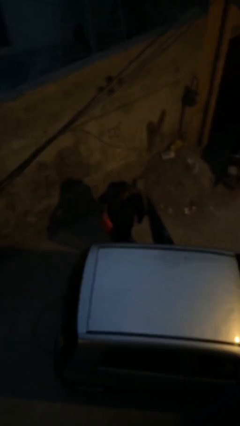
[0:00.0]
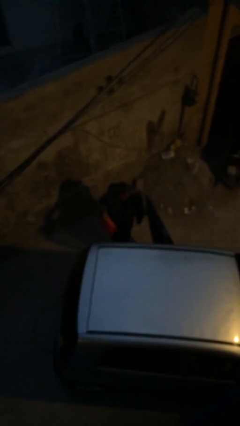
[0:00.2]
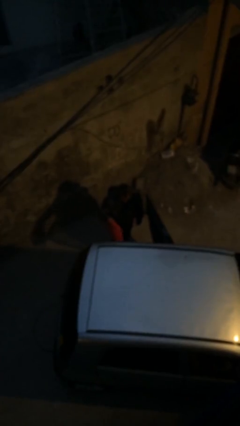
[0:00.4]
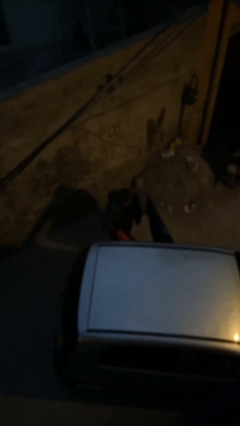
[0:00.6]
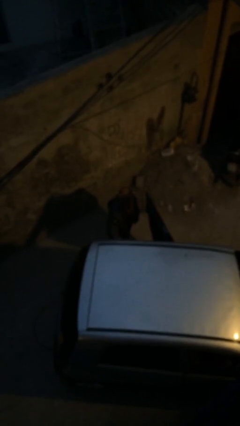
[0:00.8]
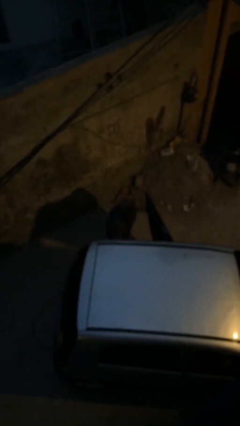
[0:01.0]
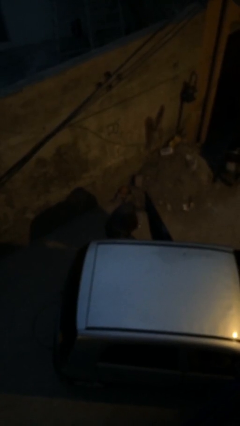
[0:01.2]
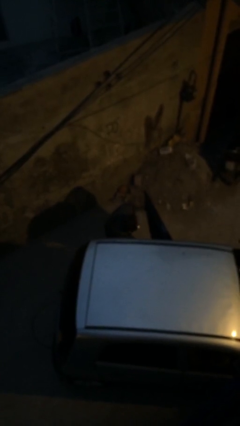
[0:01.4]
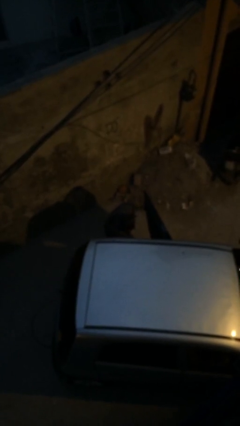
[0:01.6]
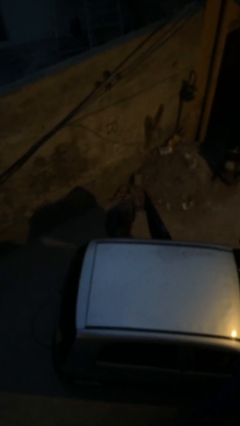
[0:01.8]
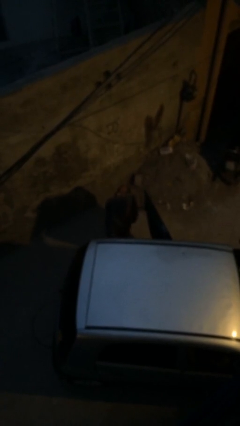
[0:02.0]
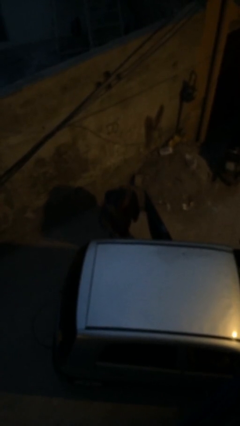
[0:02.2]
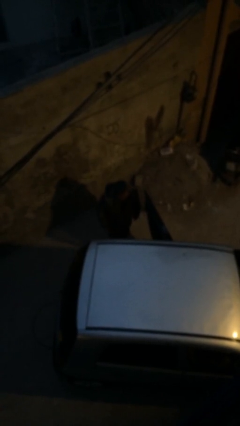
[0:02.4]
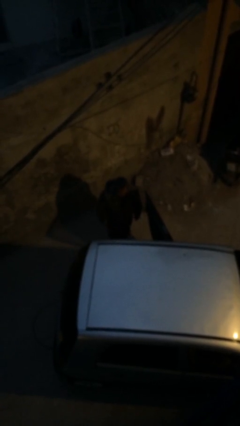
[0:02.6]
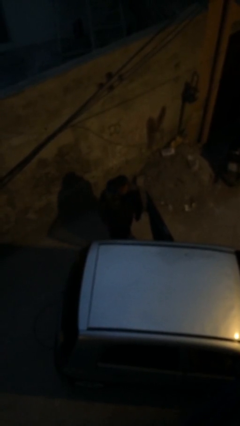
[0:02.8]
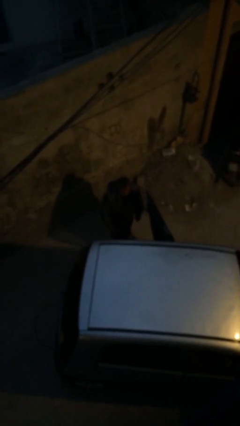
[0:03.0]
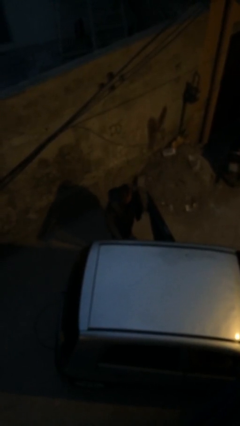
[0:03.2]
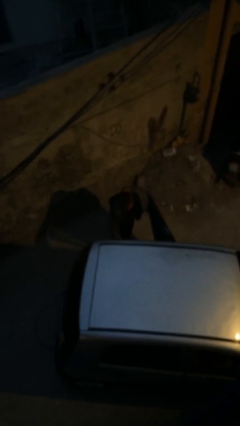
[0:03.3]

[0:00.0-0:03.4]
person loads car

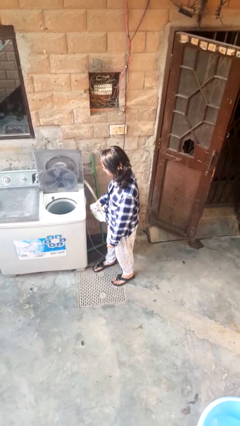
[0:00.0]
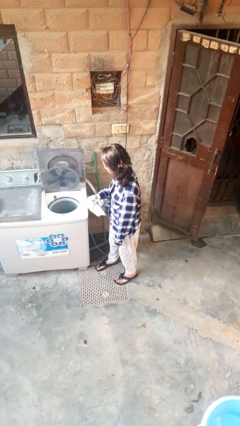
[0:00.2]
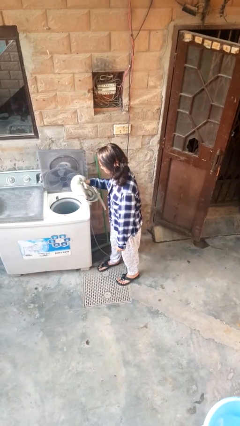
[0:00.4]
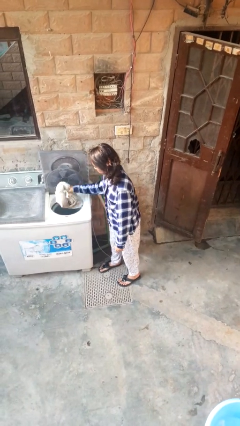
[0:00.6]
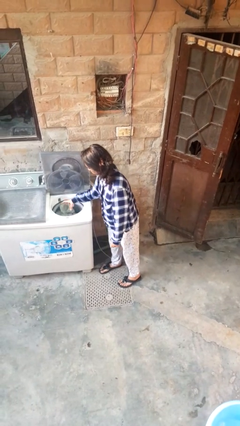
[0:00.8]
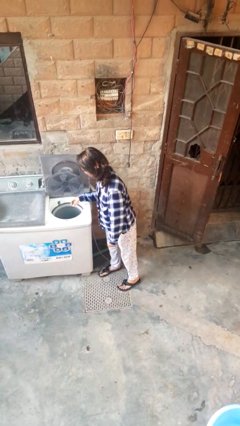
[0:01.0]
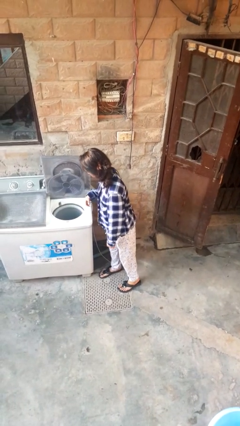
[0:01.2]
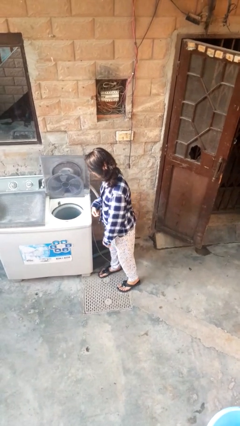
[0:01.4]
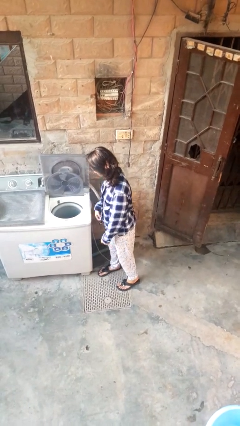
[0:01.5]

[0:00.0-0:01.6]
person loads dryer

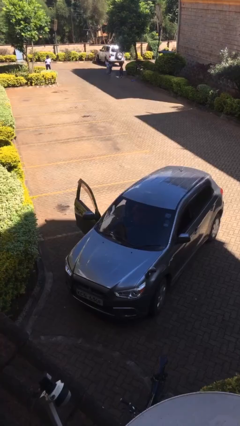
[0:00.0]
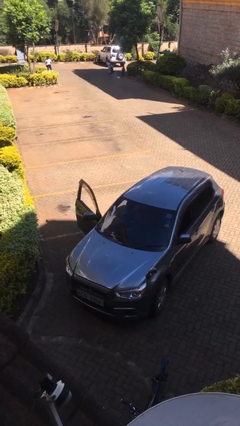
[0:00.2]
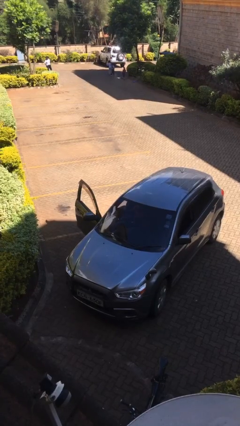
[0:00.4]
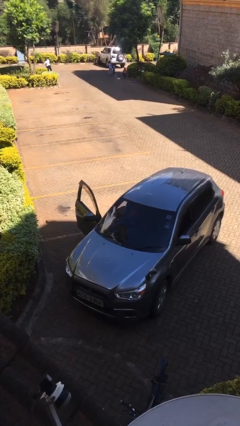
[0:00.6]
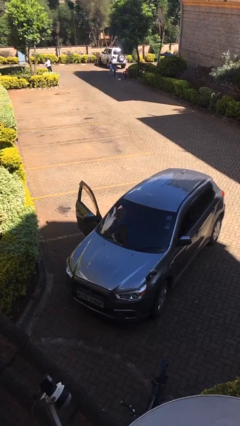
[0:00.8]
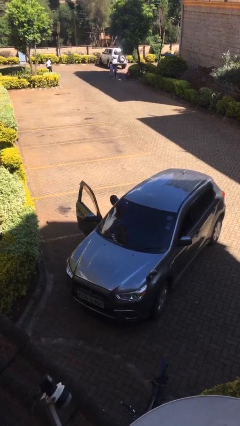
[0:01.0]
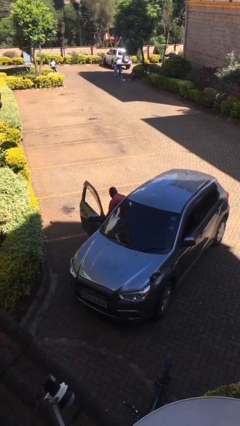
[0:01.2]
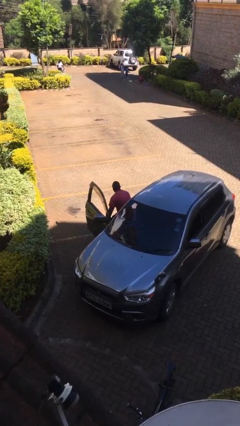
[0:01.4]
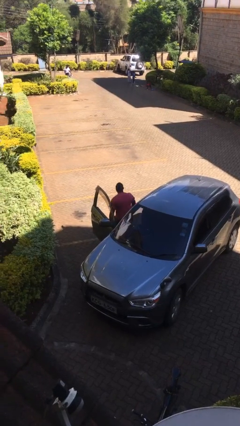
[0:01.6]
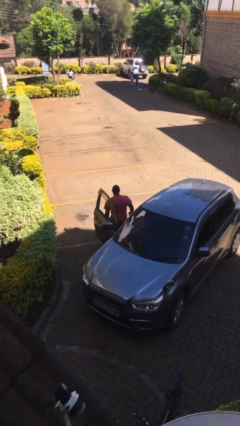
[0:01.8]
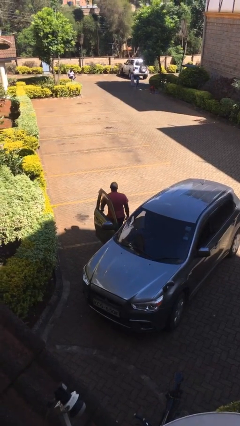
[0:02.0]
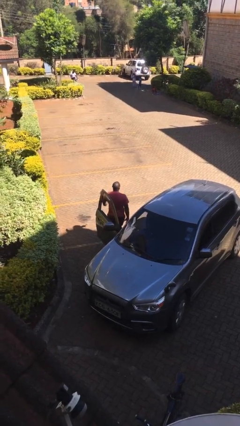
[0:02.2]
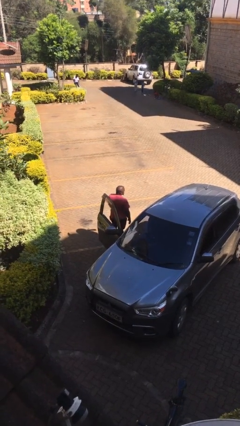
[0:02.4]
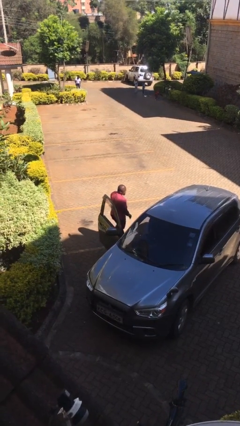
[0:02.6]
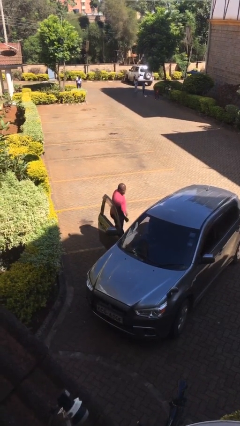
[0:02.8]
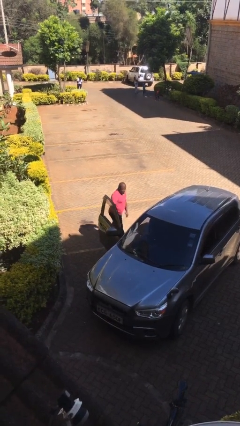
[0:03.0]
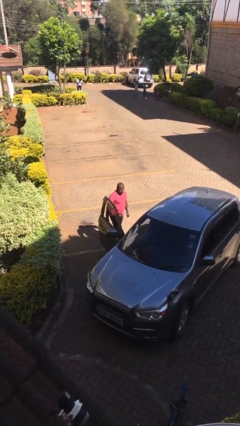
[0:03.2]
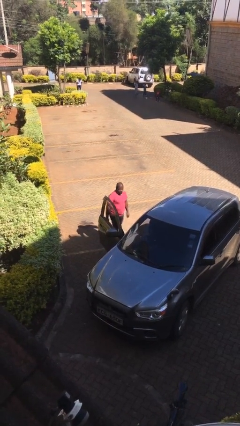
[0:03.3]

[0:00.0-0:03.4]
person exits car

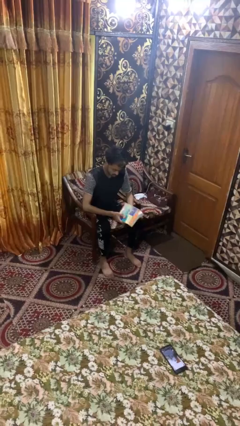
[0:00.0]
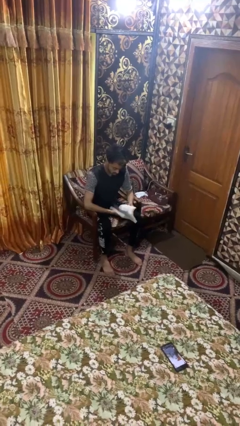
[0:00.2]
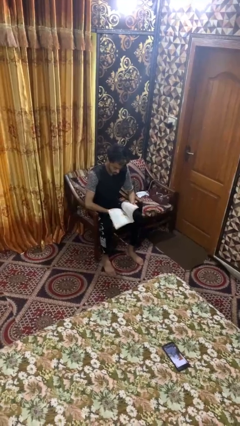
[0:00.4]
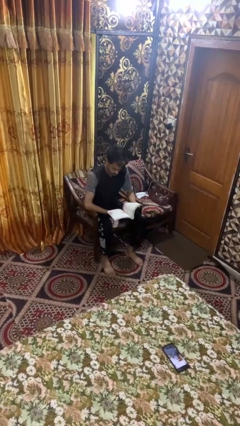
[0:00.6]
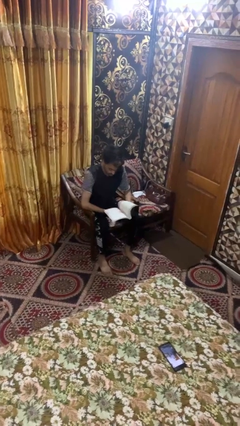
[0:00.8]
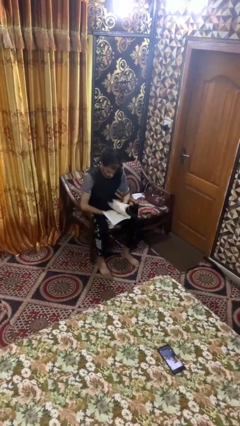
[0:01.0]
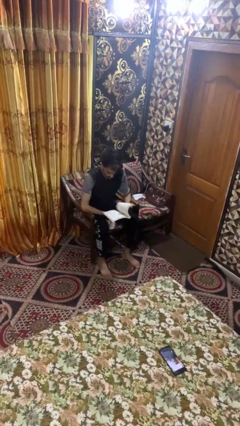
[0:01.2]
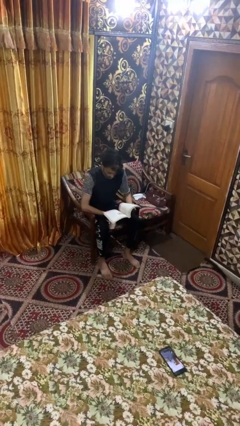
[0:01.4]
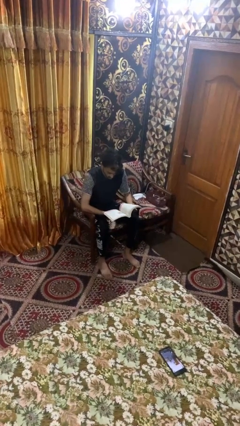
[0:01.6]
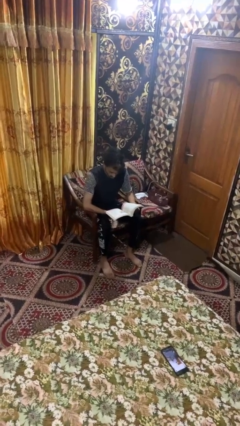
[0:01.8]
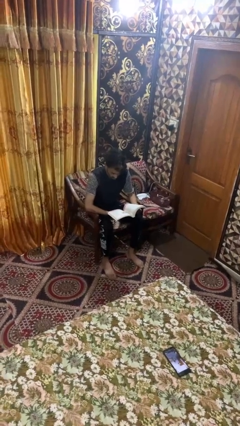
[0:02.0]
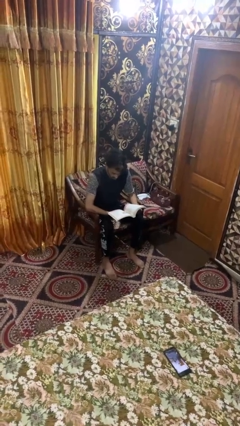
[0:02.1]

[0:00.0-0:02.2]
person reads book

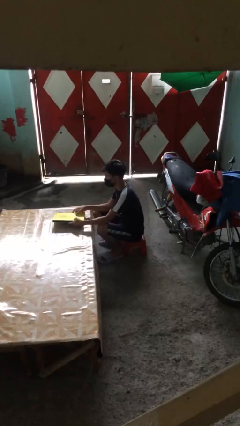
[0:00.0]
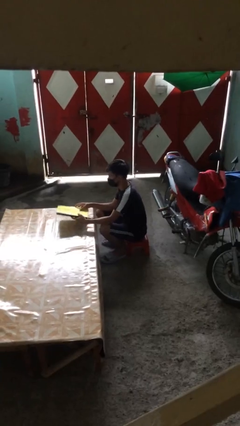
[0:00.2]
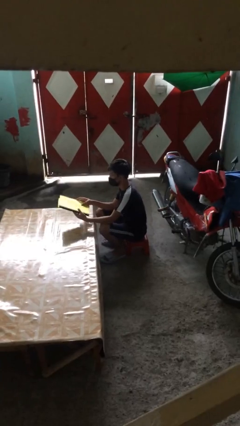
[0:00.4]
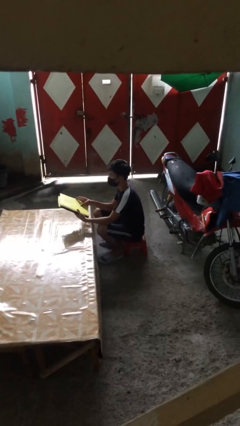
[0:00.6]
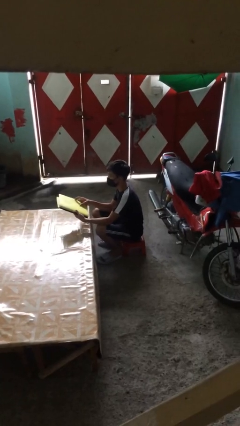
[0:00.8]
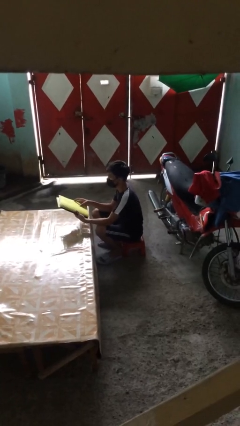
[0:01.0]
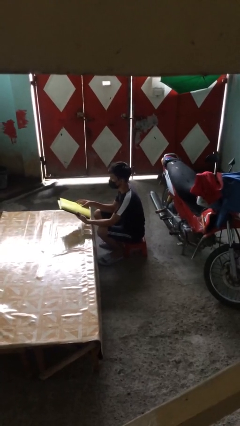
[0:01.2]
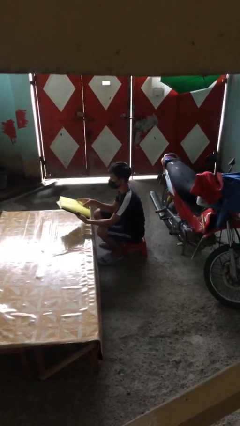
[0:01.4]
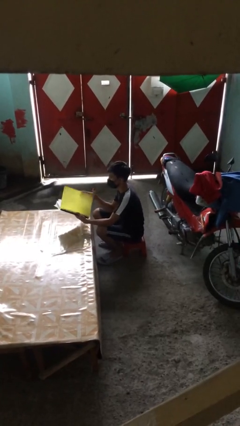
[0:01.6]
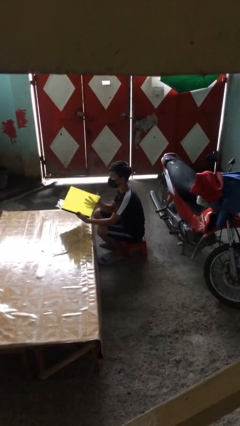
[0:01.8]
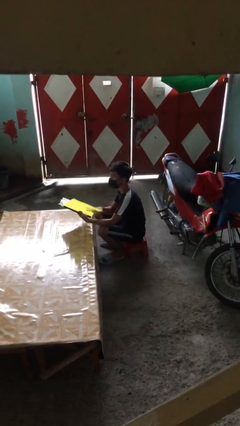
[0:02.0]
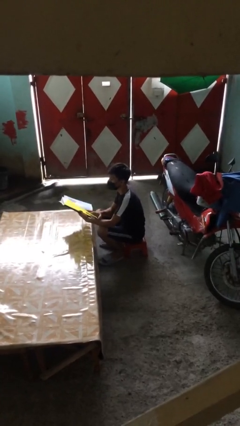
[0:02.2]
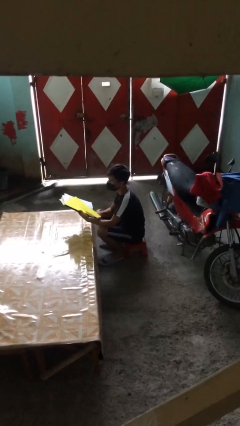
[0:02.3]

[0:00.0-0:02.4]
person picks up object from table

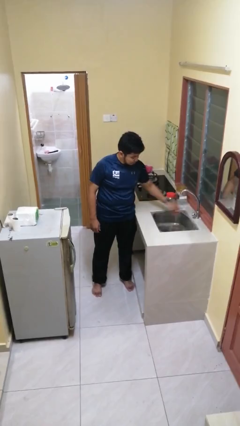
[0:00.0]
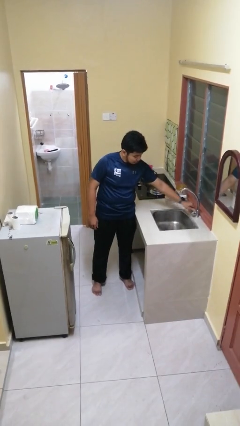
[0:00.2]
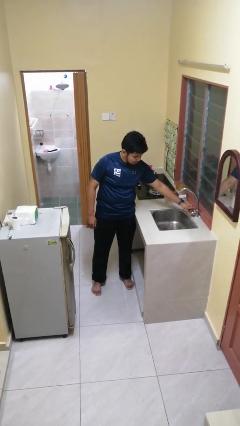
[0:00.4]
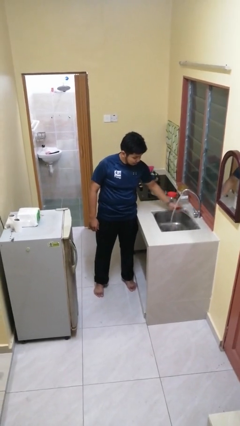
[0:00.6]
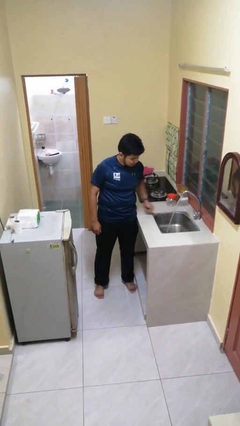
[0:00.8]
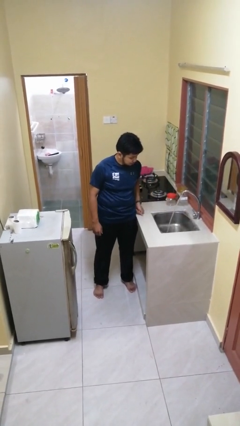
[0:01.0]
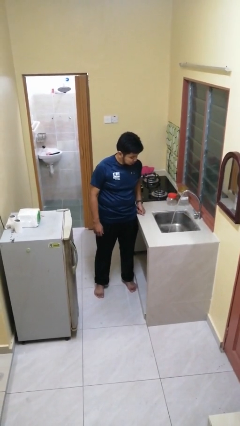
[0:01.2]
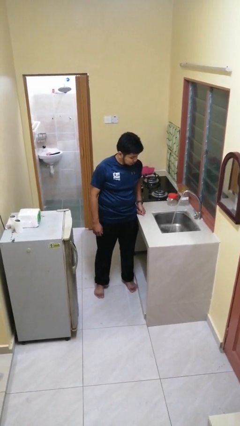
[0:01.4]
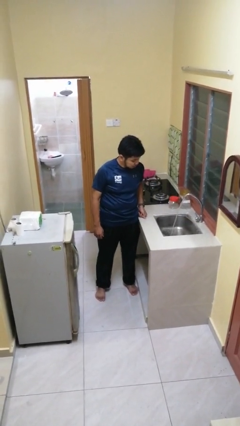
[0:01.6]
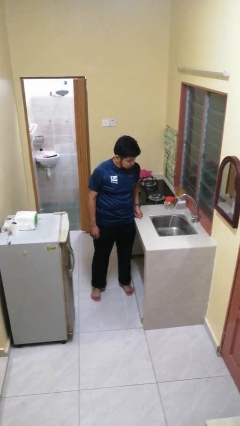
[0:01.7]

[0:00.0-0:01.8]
person turns on faucet

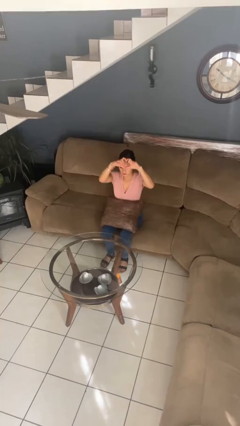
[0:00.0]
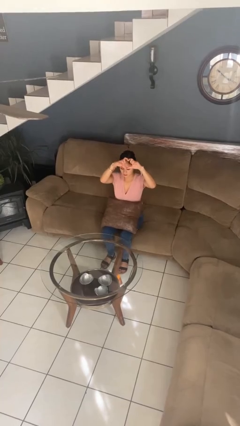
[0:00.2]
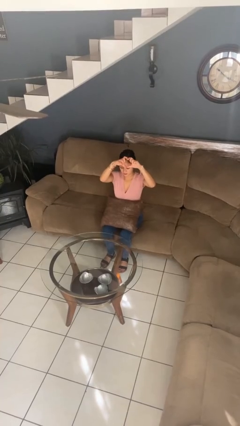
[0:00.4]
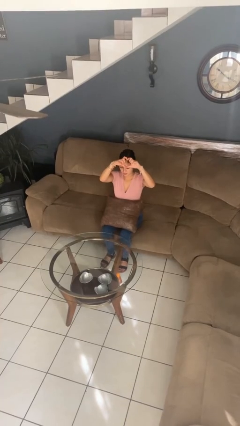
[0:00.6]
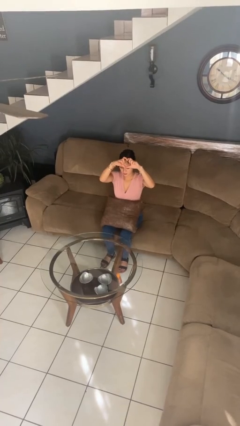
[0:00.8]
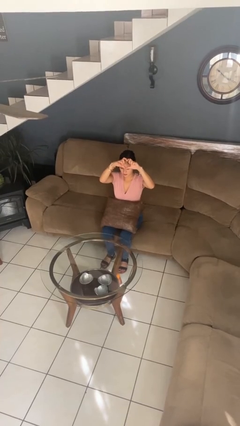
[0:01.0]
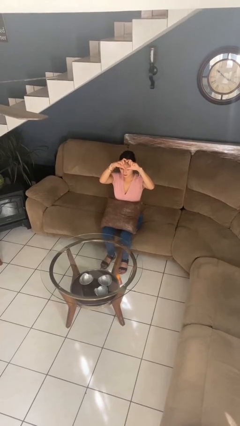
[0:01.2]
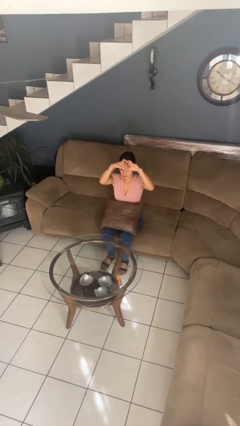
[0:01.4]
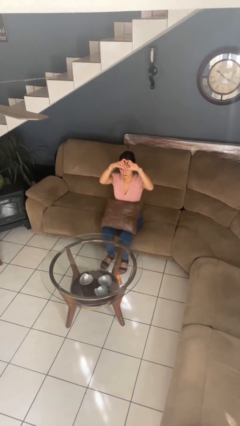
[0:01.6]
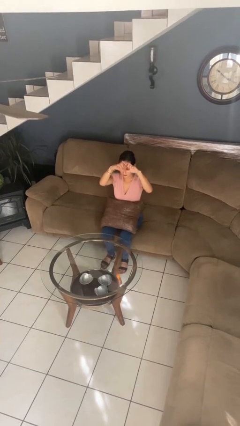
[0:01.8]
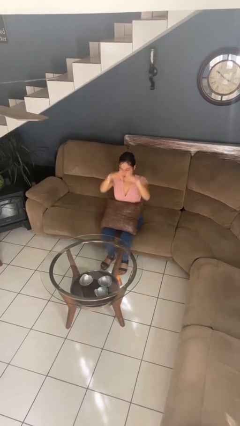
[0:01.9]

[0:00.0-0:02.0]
person gestures heart

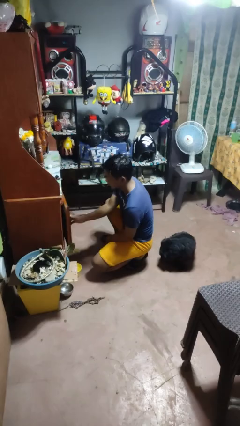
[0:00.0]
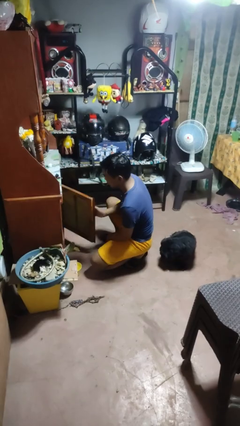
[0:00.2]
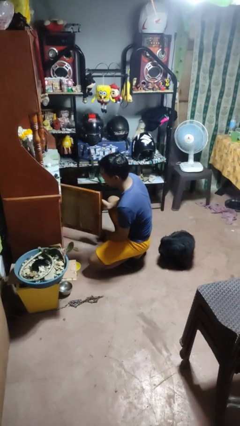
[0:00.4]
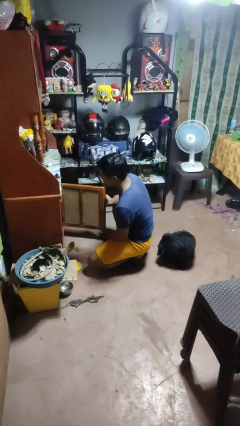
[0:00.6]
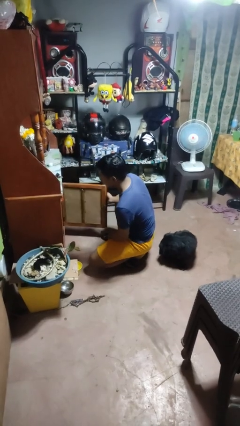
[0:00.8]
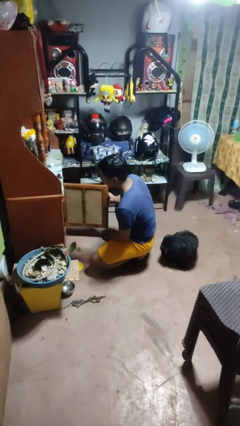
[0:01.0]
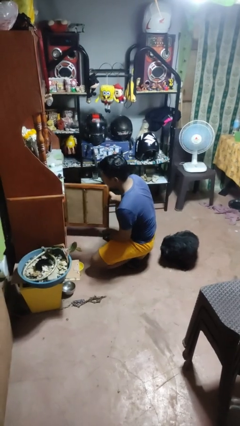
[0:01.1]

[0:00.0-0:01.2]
person opens cabinet
